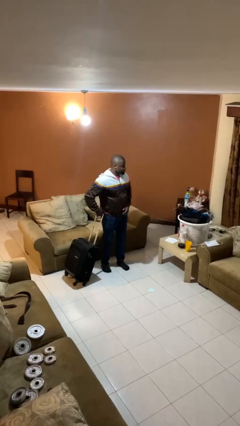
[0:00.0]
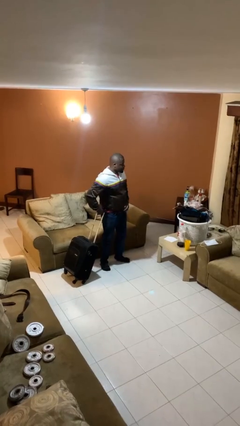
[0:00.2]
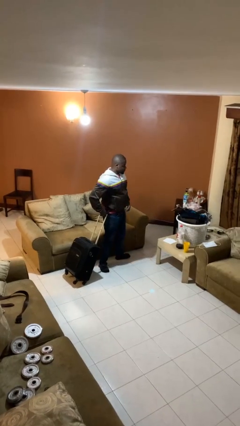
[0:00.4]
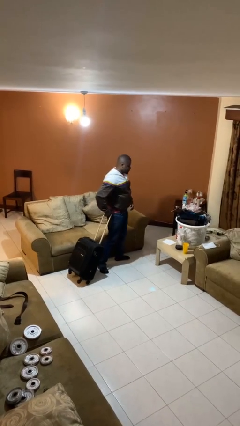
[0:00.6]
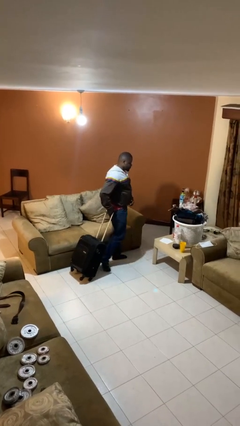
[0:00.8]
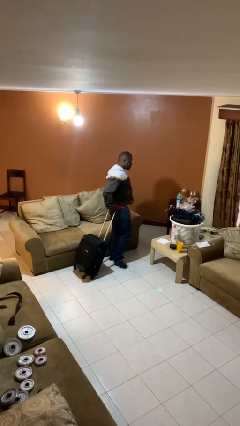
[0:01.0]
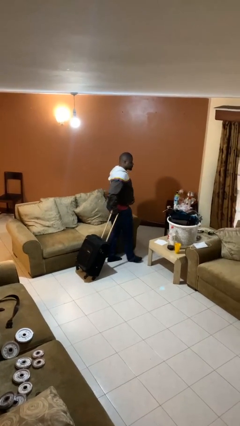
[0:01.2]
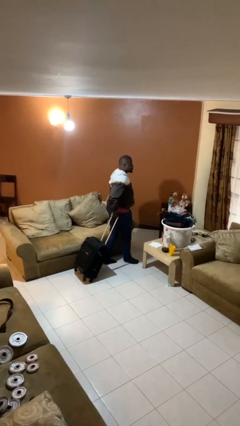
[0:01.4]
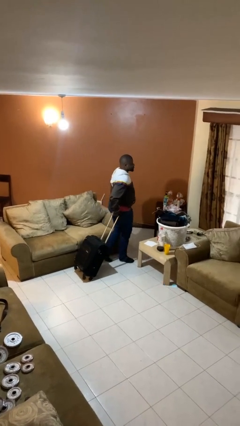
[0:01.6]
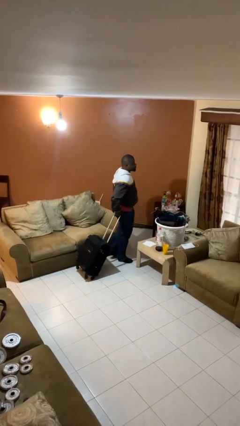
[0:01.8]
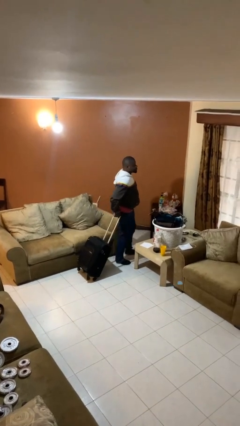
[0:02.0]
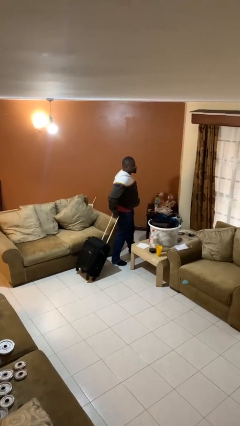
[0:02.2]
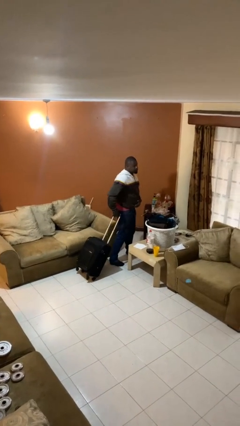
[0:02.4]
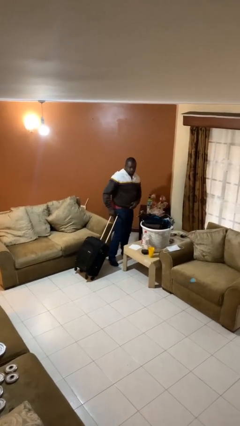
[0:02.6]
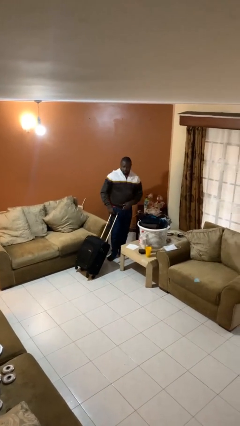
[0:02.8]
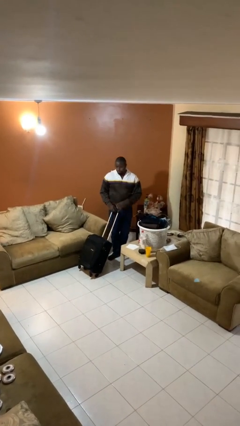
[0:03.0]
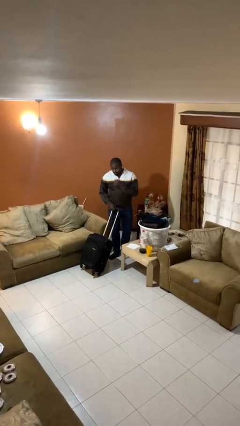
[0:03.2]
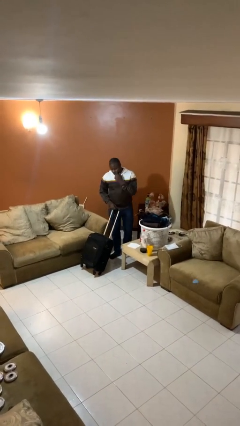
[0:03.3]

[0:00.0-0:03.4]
person pulls wheeled cart

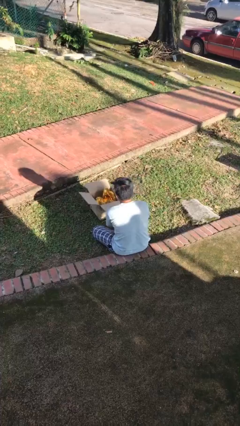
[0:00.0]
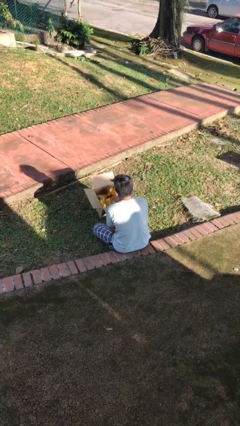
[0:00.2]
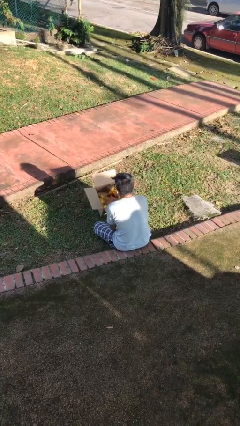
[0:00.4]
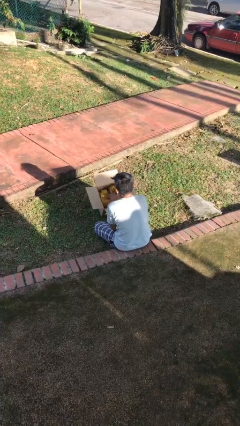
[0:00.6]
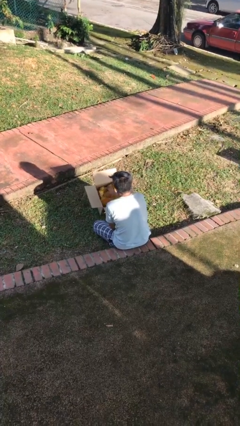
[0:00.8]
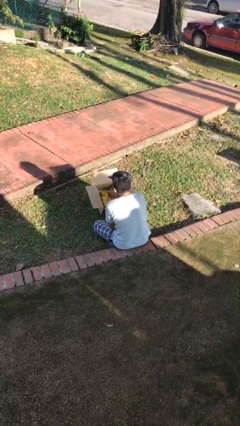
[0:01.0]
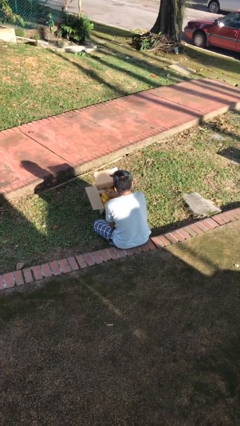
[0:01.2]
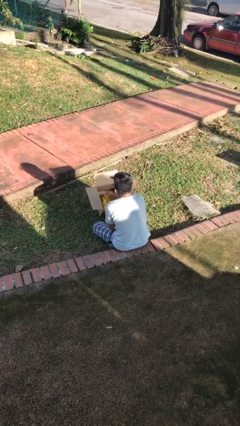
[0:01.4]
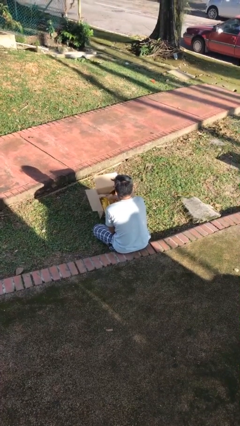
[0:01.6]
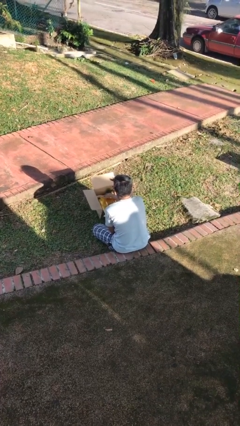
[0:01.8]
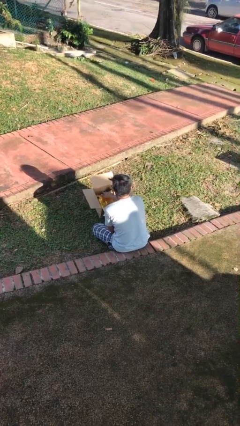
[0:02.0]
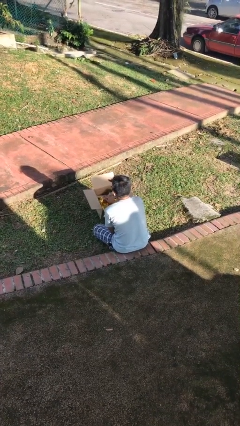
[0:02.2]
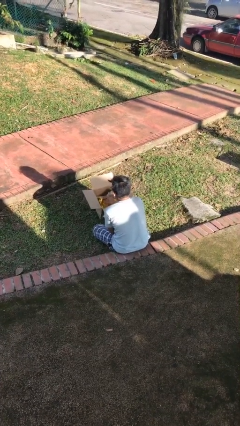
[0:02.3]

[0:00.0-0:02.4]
person searches in box

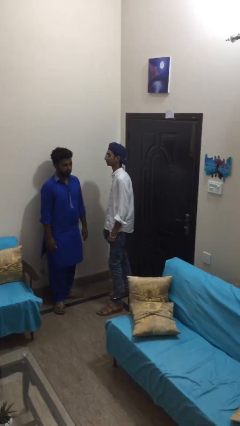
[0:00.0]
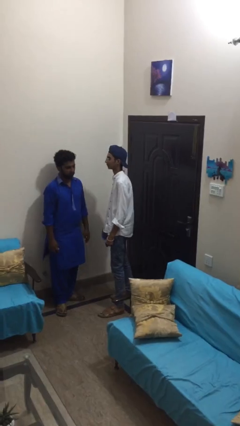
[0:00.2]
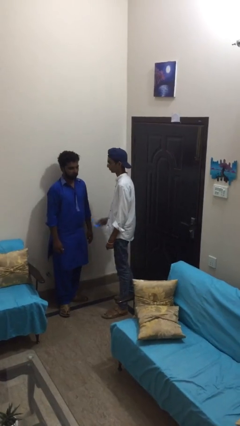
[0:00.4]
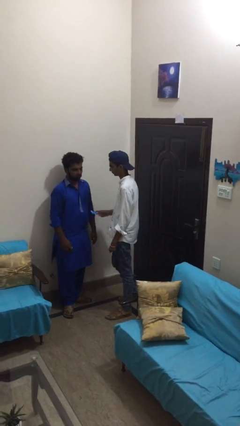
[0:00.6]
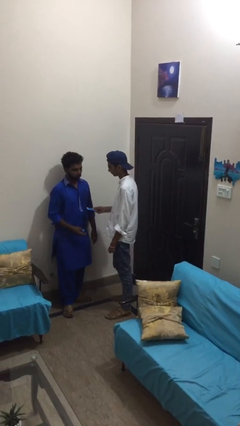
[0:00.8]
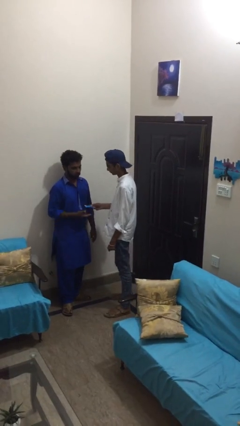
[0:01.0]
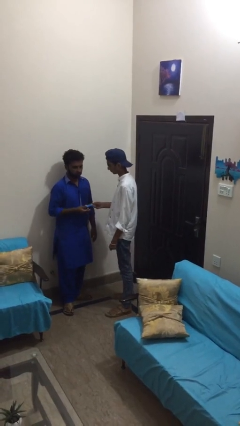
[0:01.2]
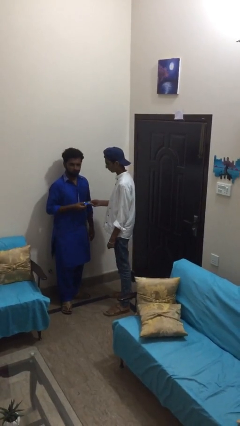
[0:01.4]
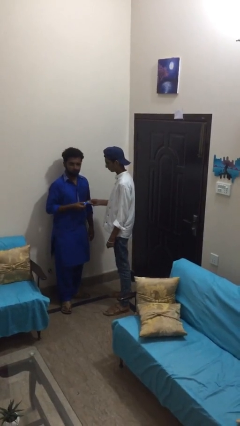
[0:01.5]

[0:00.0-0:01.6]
person transfers object to person

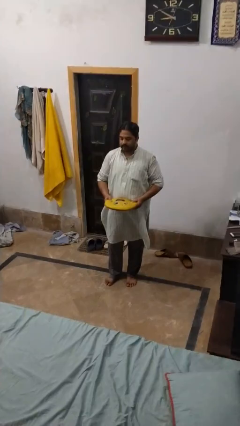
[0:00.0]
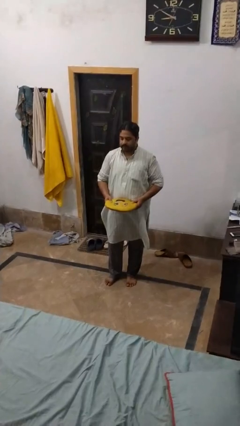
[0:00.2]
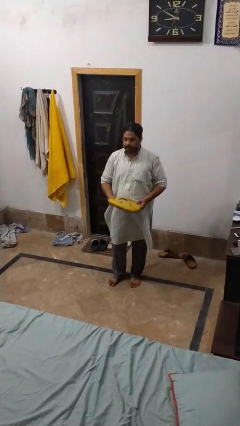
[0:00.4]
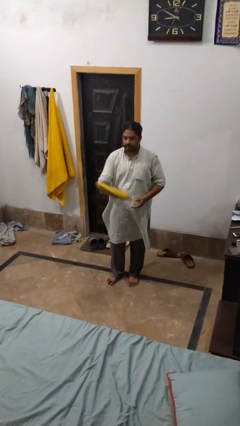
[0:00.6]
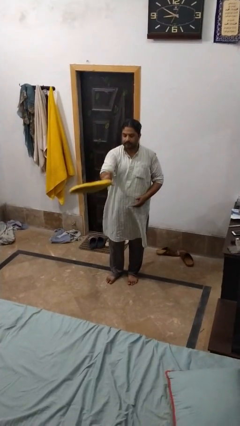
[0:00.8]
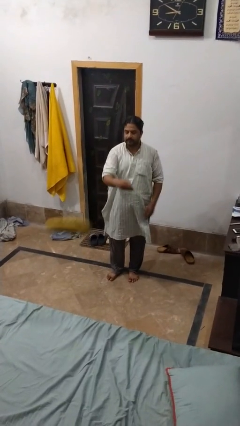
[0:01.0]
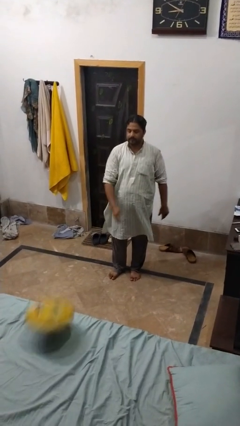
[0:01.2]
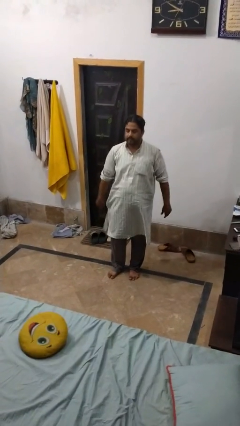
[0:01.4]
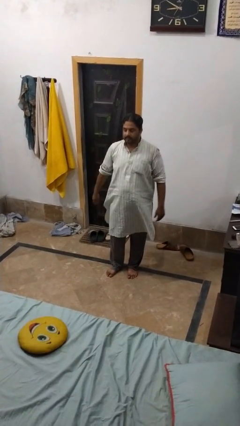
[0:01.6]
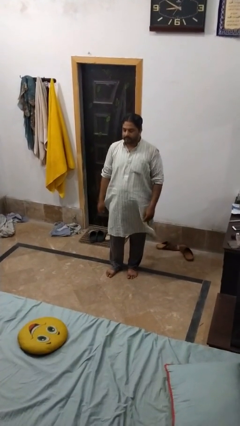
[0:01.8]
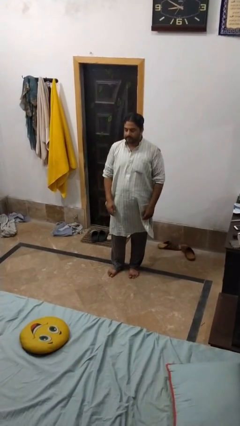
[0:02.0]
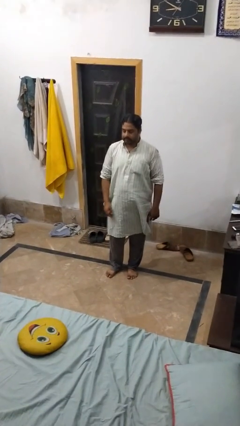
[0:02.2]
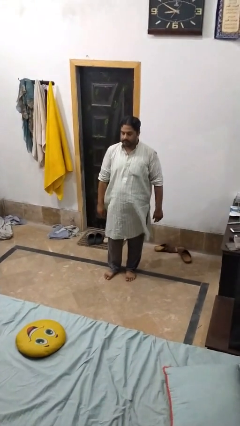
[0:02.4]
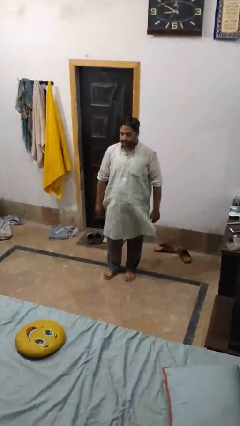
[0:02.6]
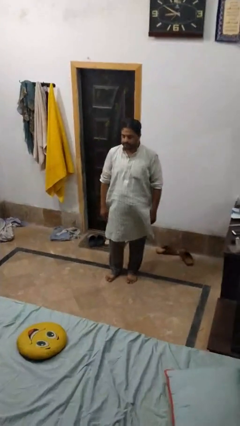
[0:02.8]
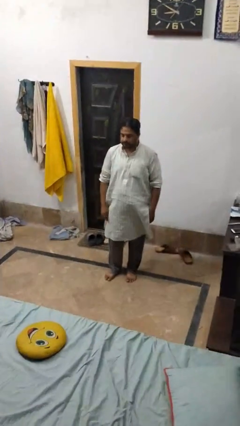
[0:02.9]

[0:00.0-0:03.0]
person throws object on bed

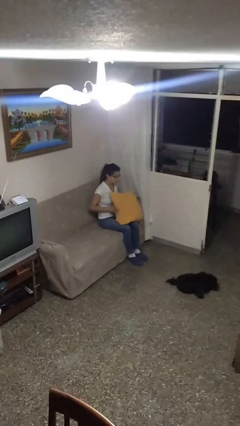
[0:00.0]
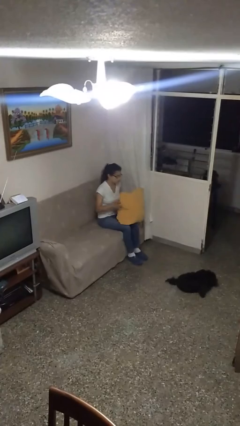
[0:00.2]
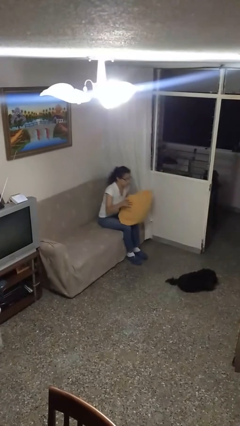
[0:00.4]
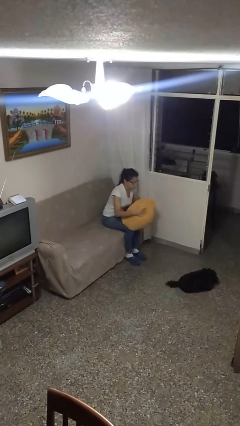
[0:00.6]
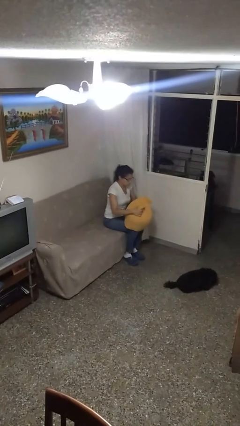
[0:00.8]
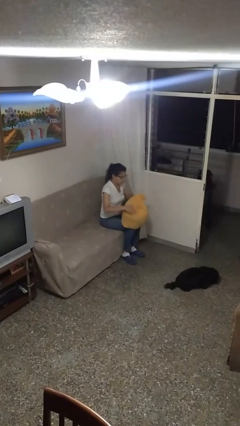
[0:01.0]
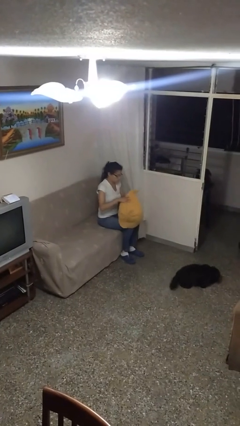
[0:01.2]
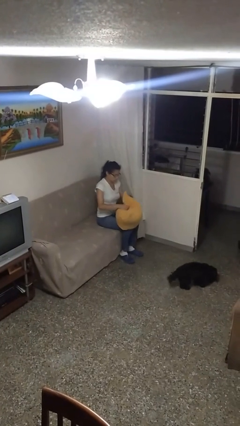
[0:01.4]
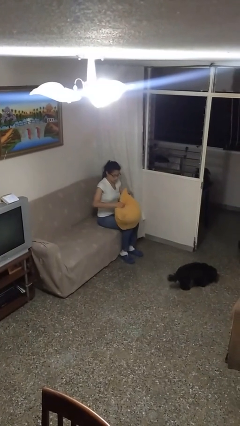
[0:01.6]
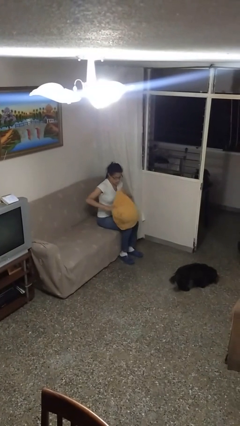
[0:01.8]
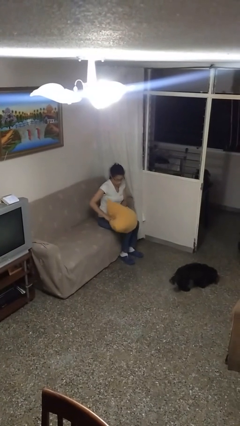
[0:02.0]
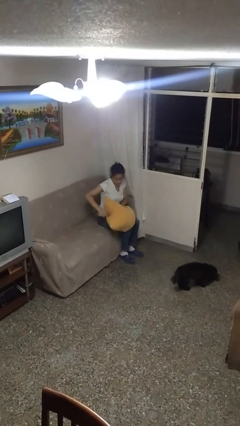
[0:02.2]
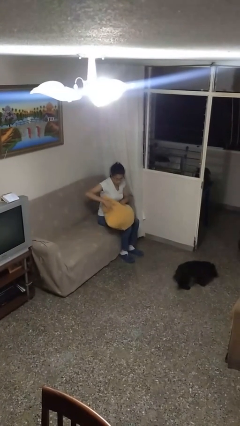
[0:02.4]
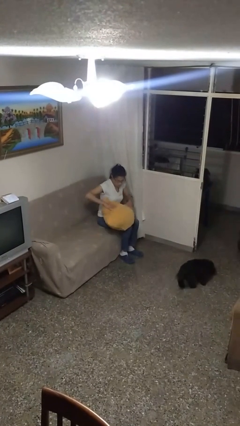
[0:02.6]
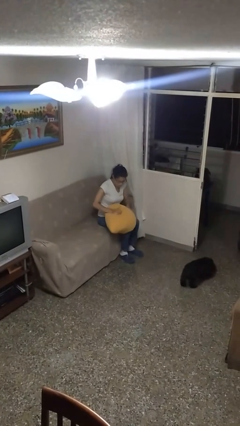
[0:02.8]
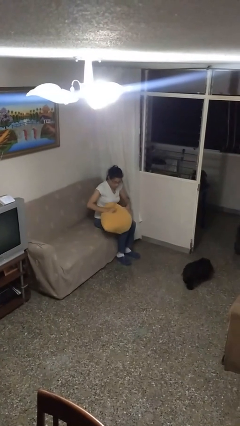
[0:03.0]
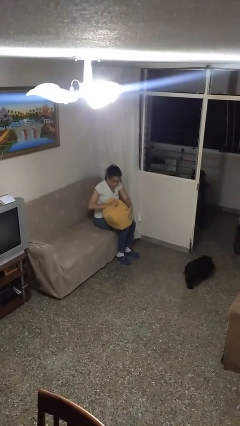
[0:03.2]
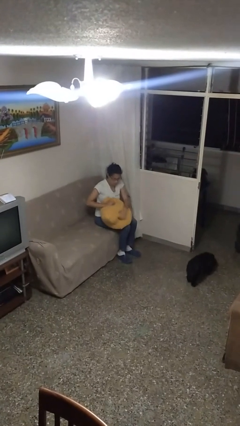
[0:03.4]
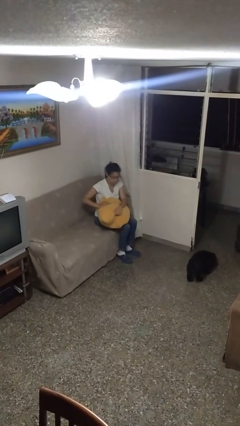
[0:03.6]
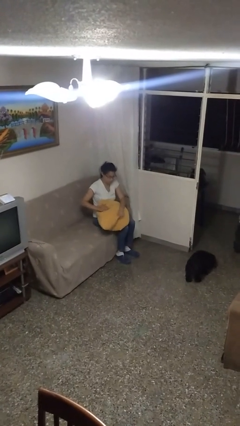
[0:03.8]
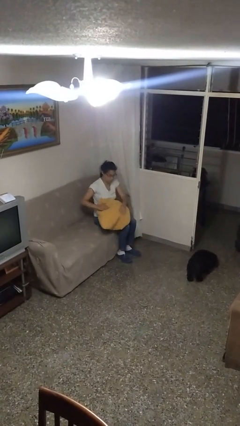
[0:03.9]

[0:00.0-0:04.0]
person squeezes object

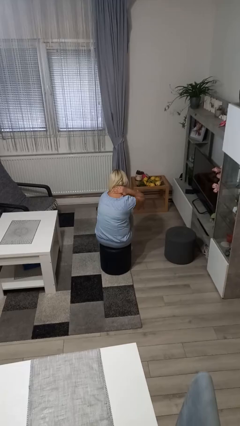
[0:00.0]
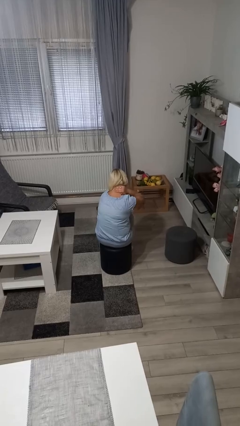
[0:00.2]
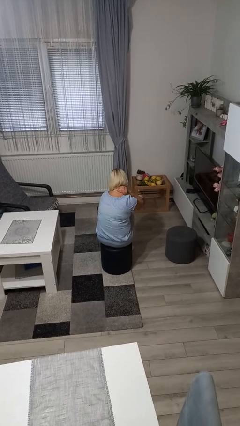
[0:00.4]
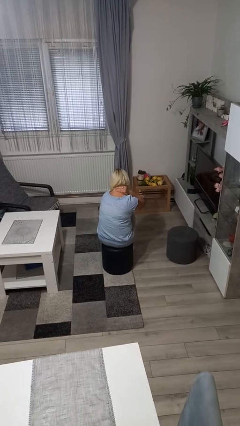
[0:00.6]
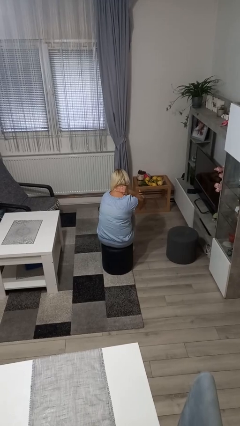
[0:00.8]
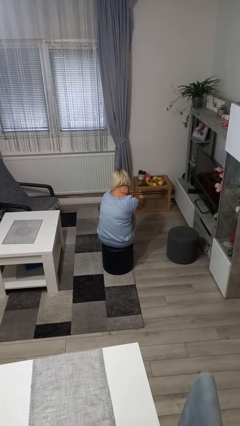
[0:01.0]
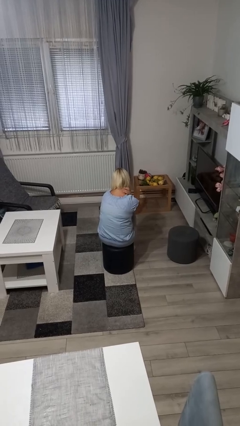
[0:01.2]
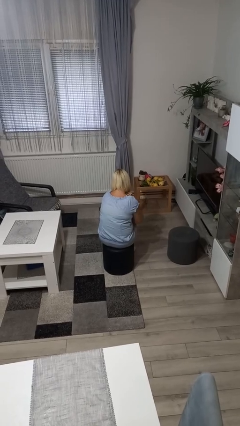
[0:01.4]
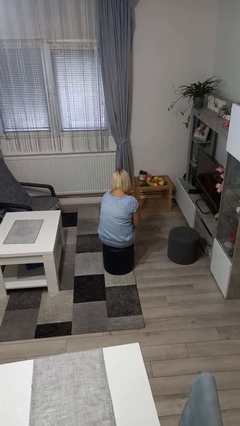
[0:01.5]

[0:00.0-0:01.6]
person rubs neck

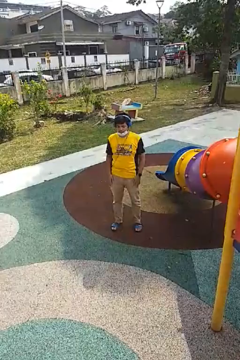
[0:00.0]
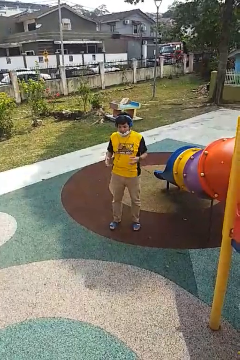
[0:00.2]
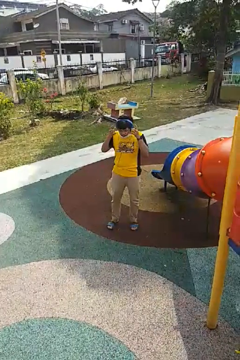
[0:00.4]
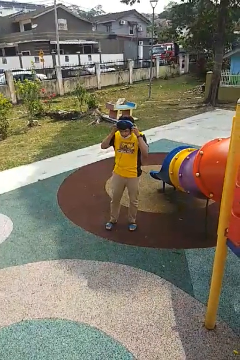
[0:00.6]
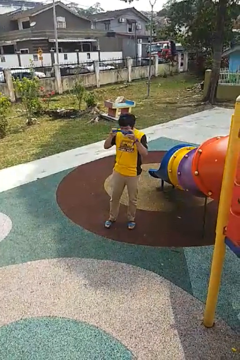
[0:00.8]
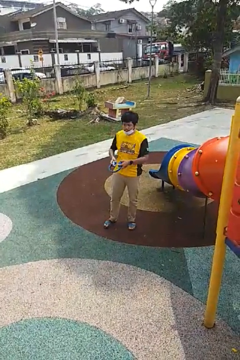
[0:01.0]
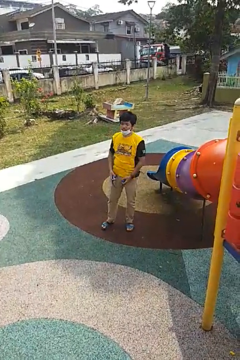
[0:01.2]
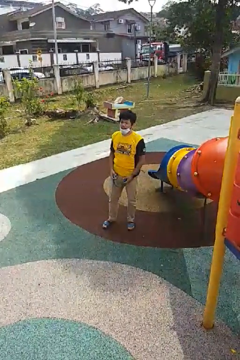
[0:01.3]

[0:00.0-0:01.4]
person takes off headphones
